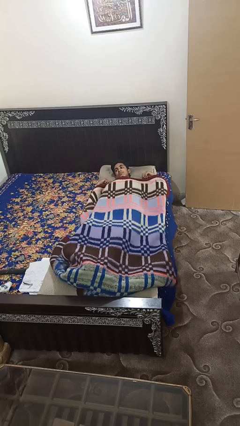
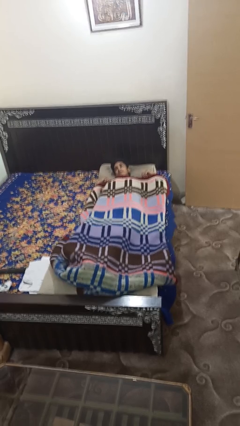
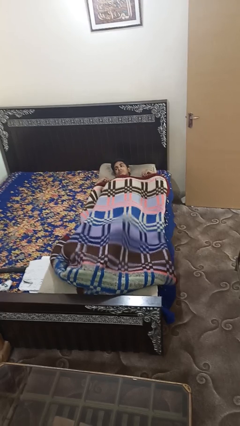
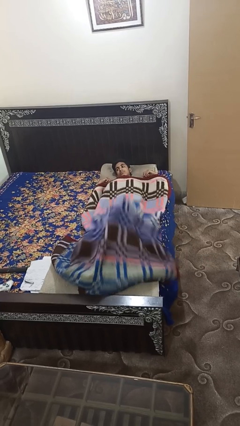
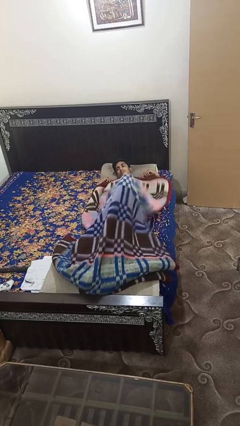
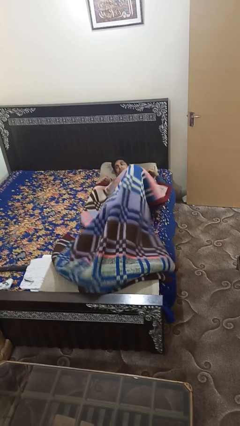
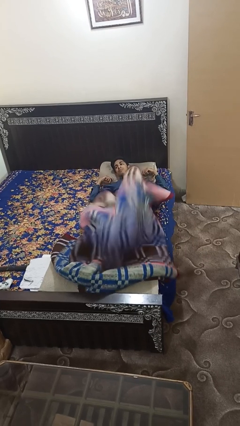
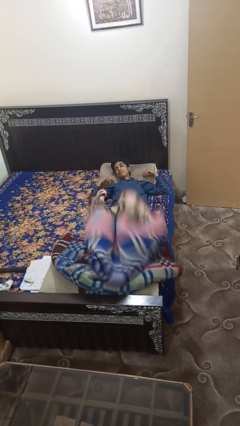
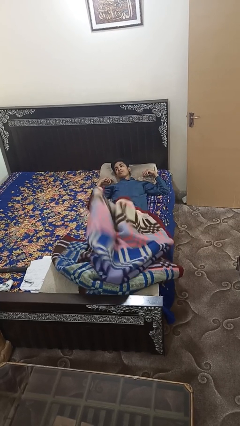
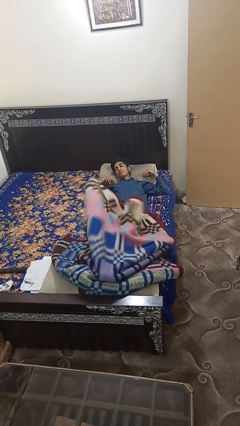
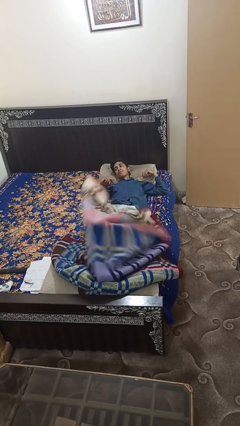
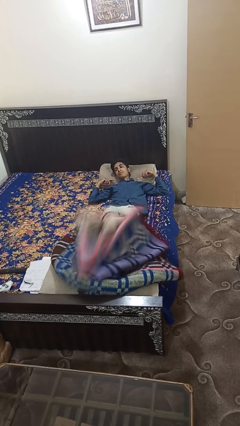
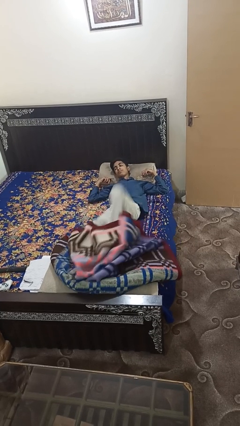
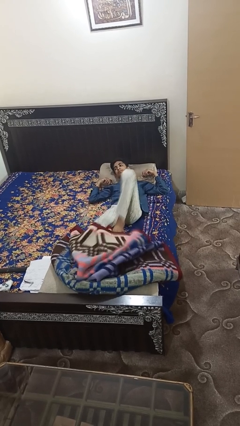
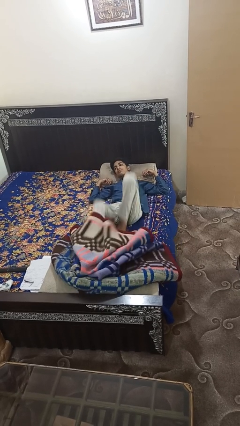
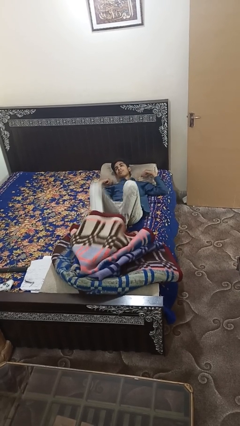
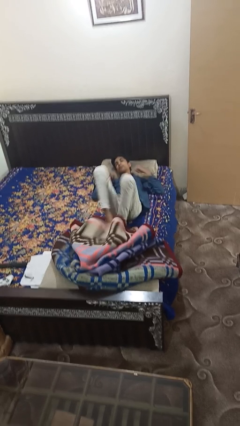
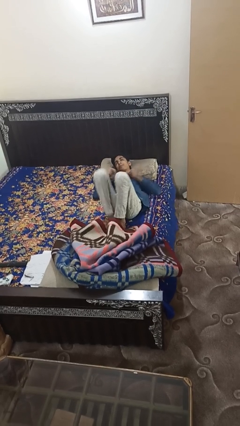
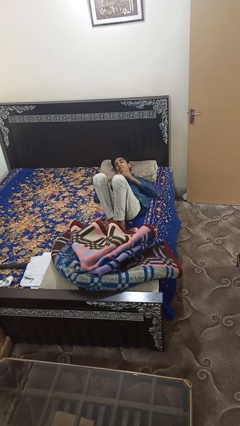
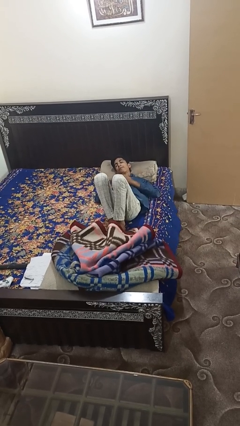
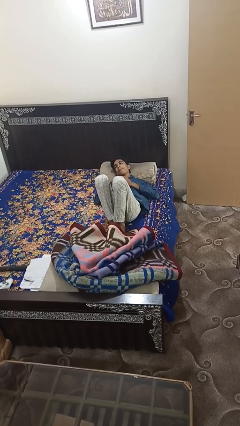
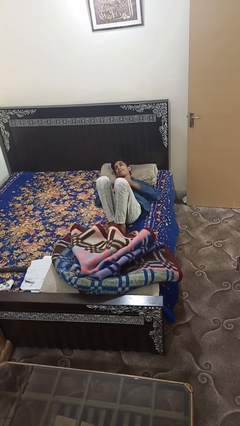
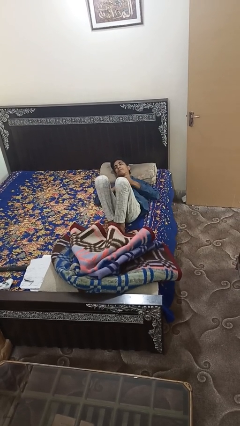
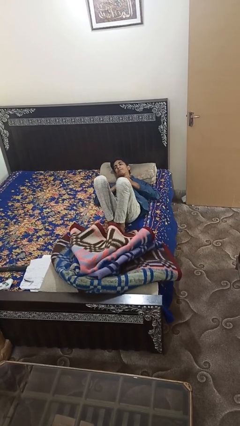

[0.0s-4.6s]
person uncovers with bedsheets

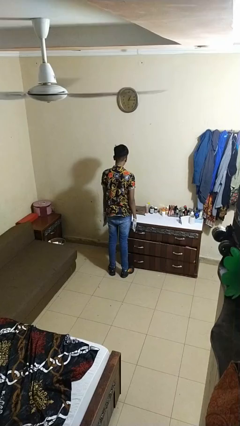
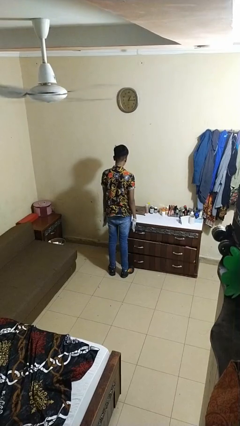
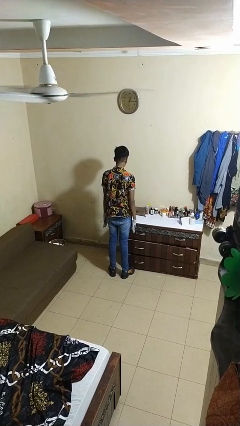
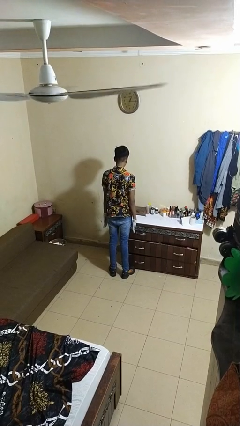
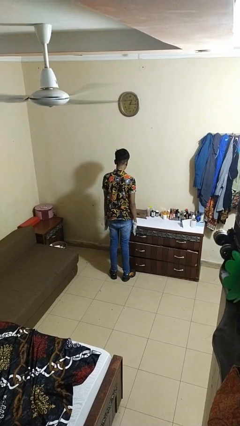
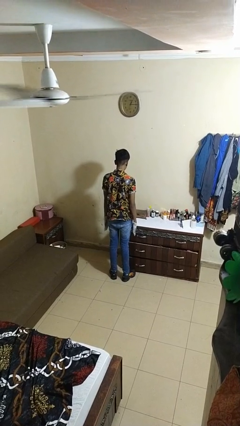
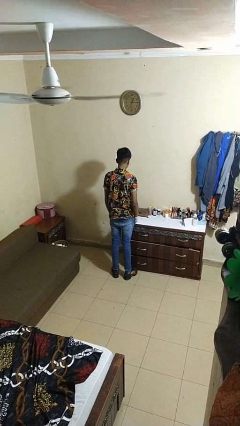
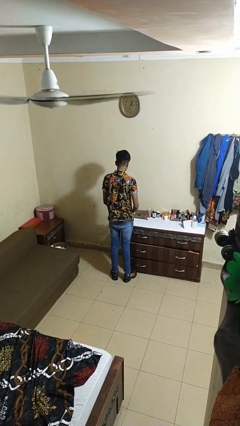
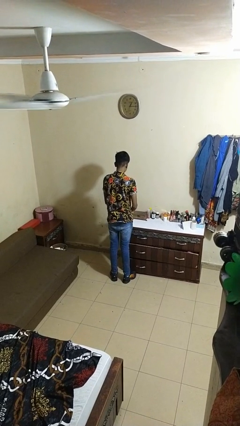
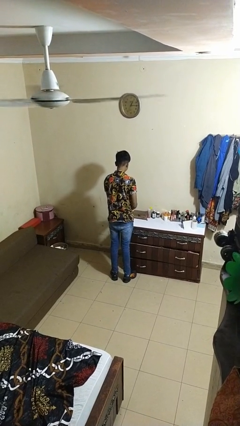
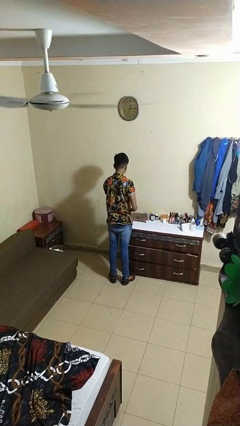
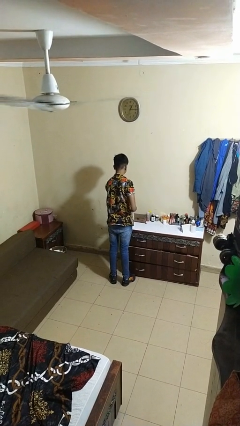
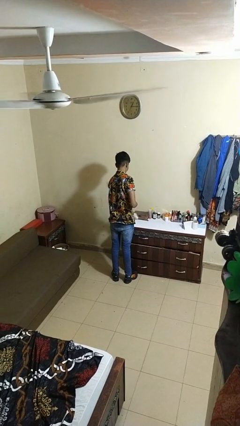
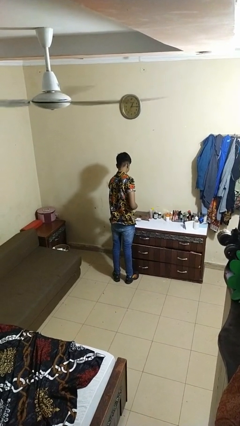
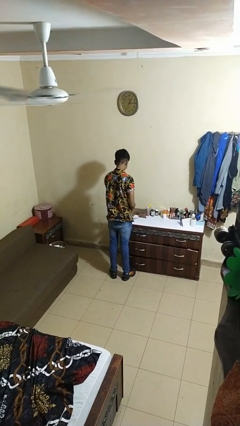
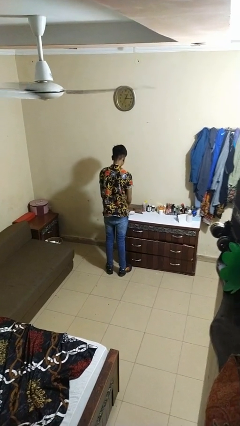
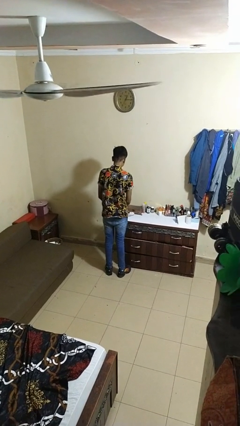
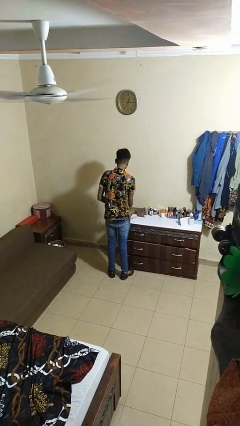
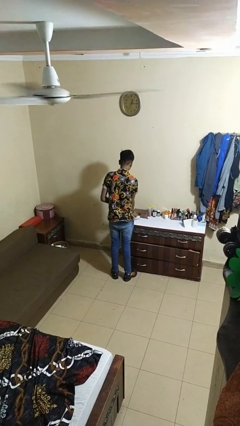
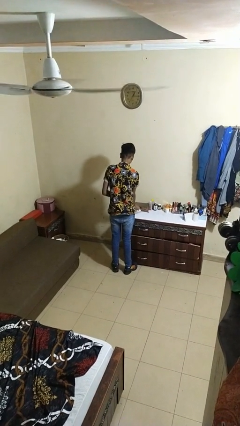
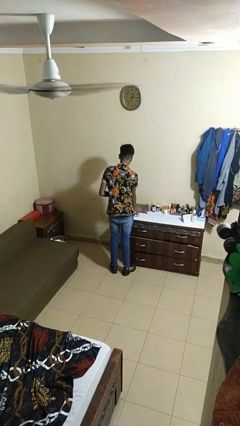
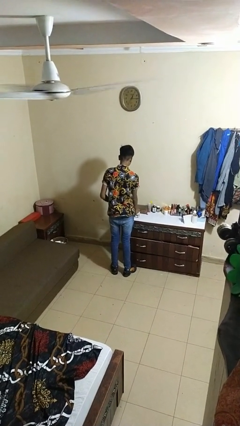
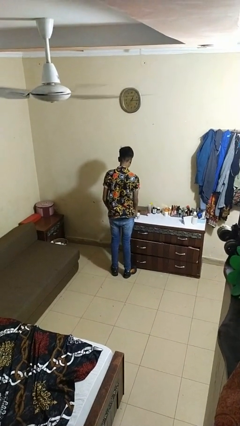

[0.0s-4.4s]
person takes off gloves

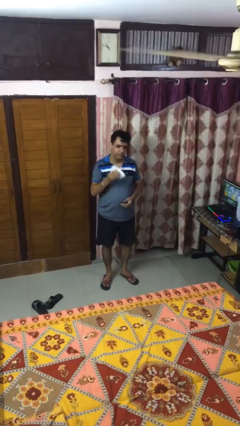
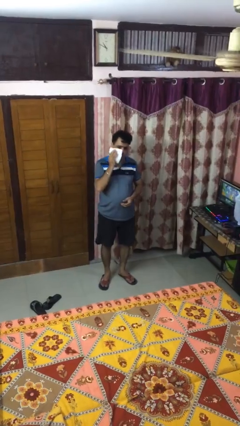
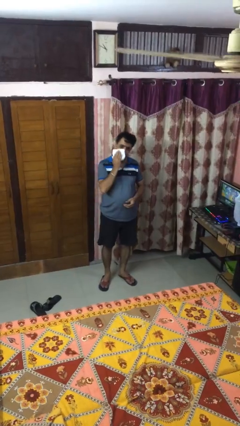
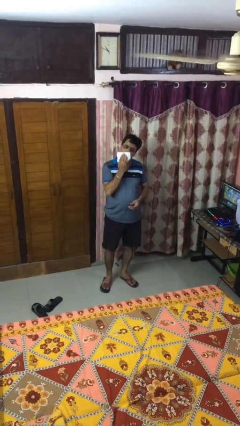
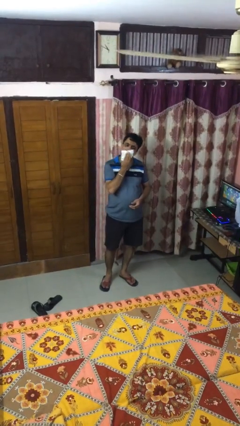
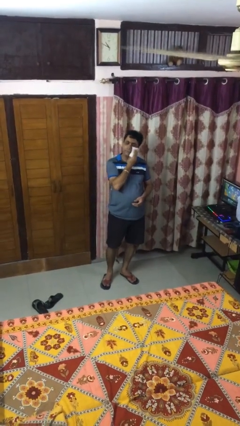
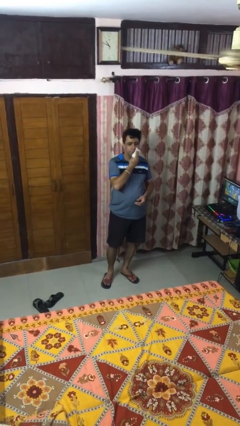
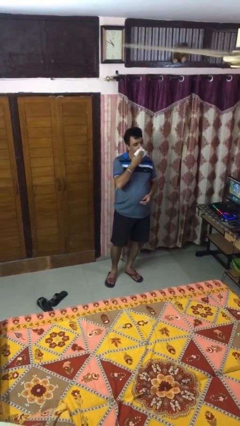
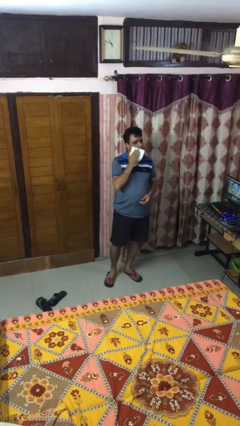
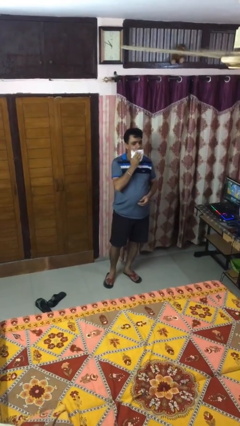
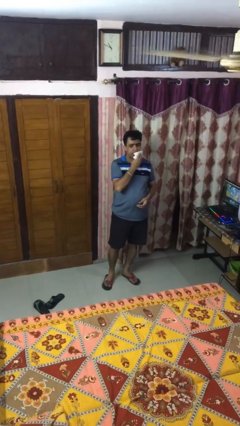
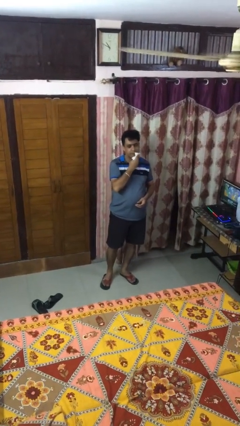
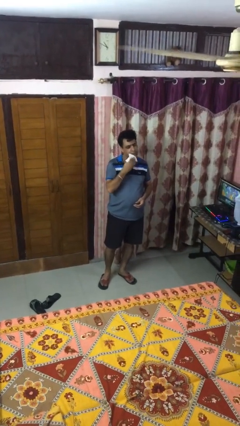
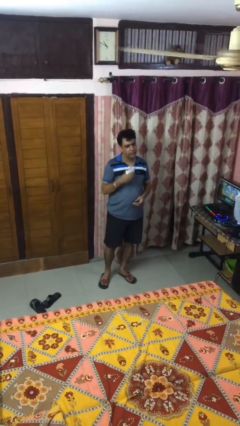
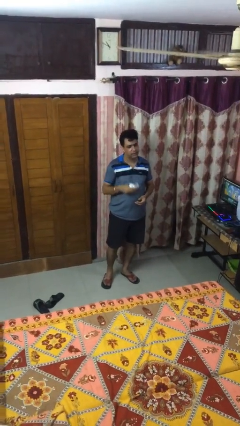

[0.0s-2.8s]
person wipes mouth with napkin

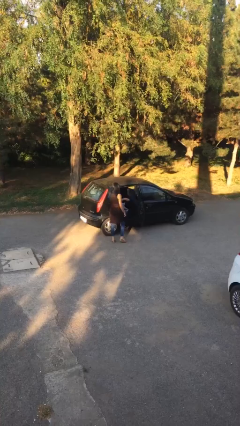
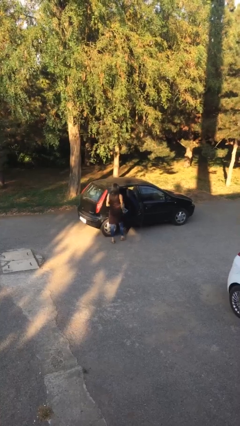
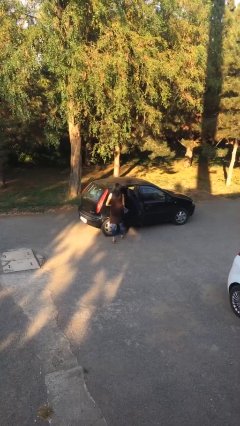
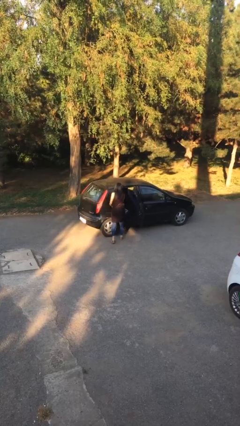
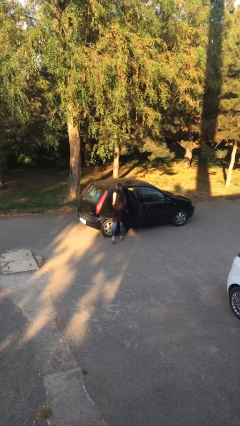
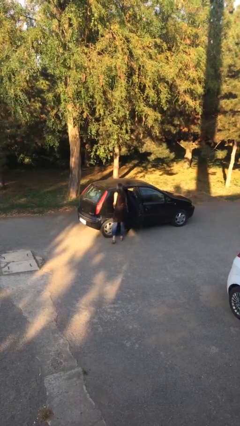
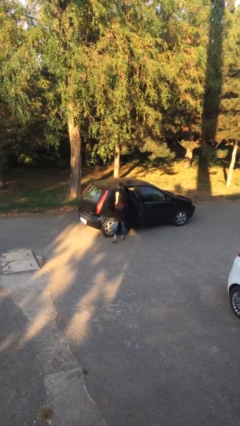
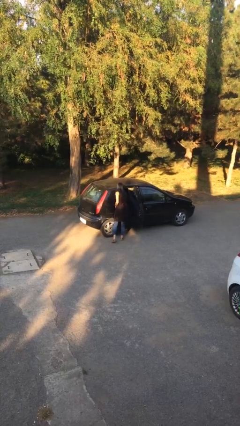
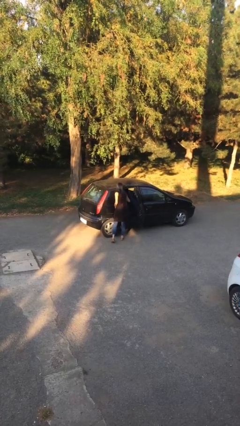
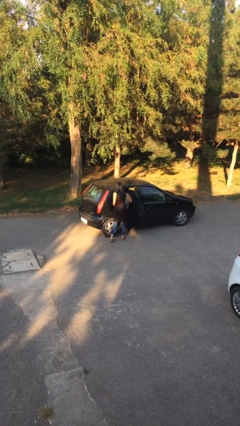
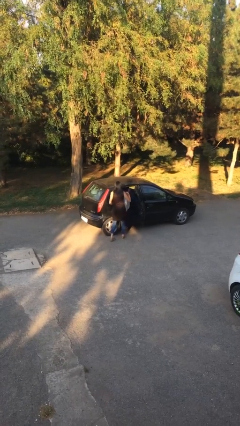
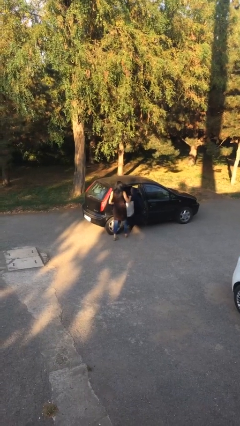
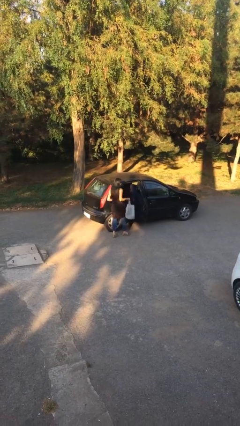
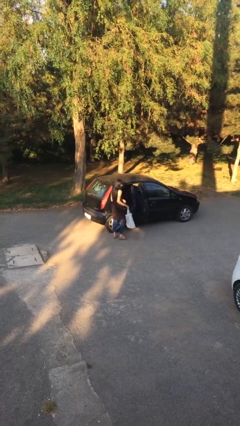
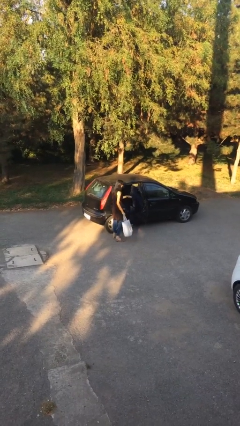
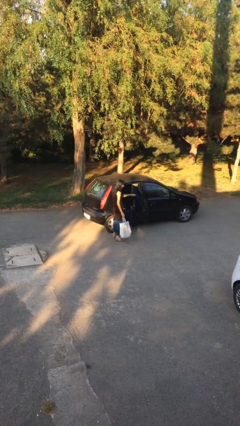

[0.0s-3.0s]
person unloads car

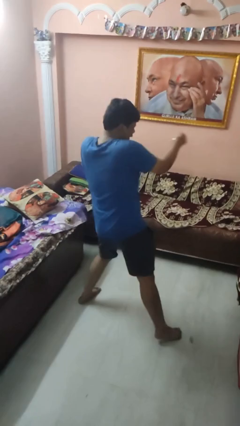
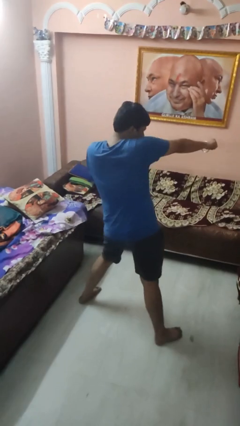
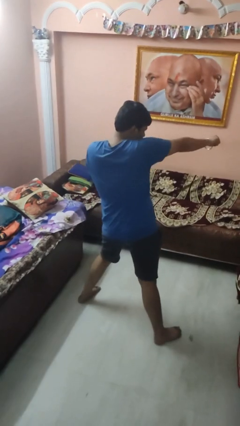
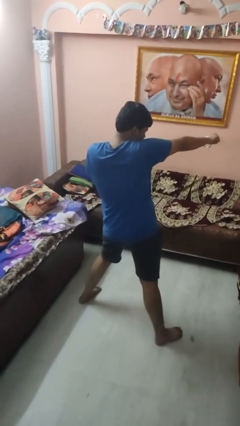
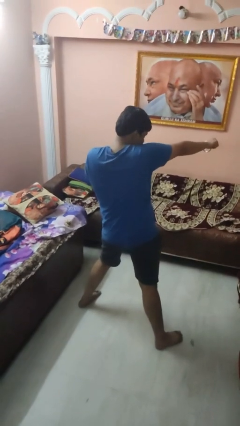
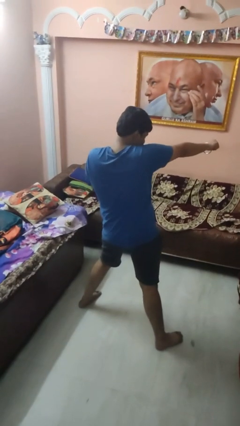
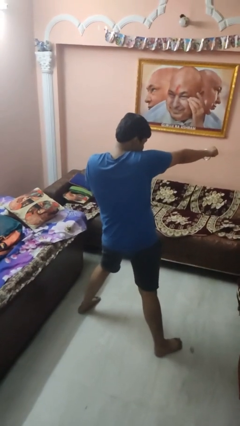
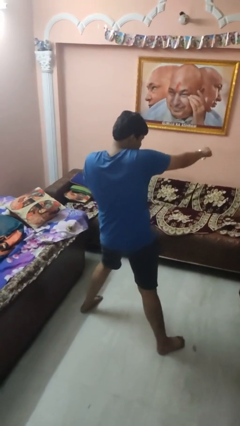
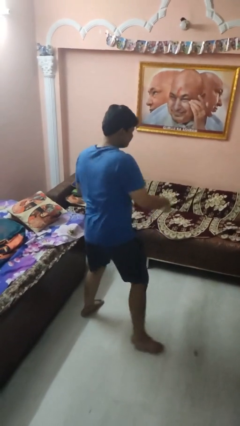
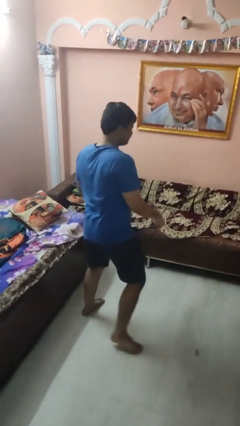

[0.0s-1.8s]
person punches

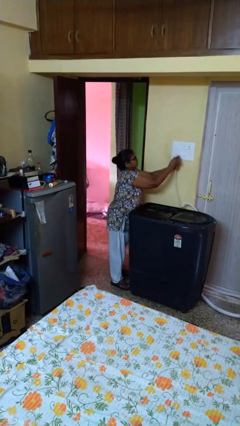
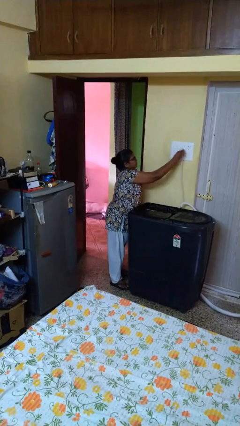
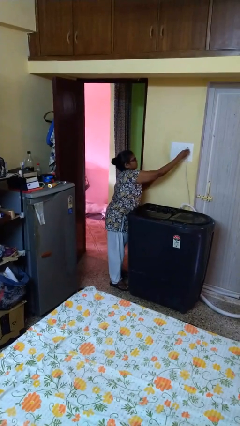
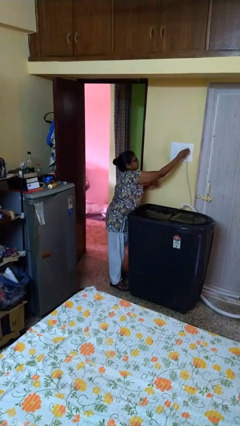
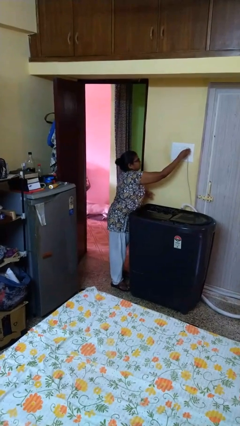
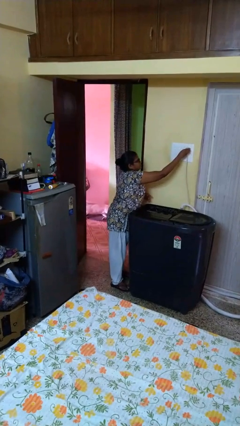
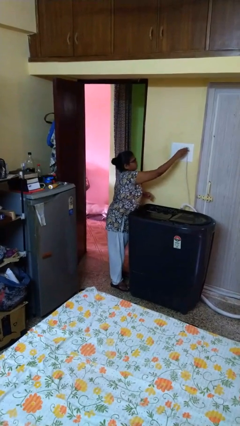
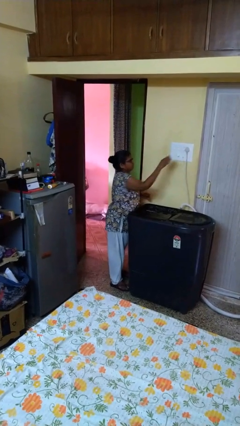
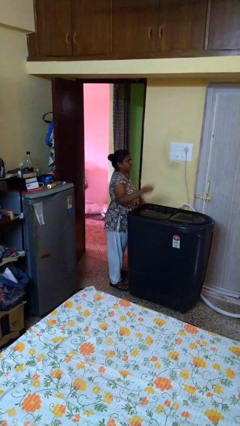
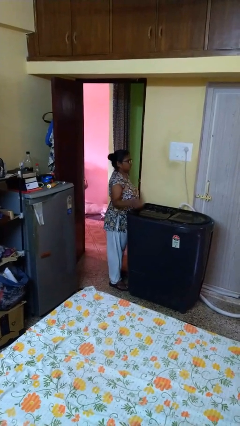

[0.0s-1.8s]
person plugs into electrical socket
